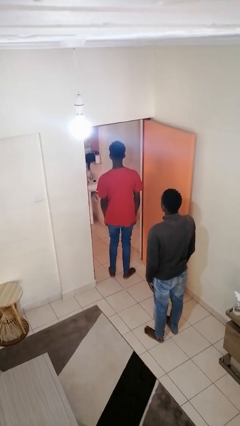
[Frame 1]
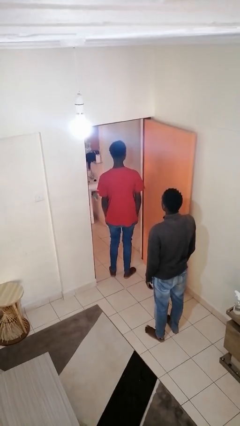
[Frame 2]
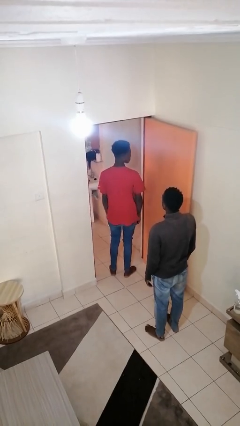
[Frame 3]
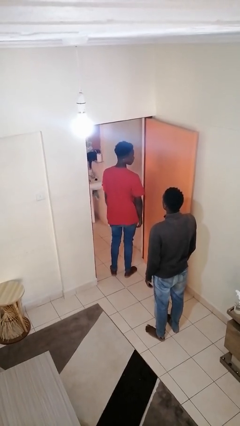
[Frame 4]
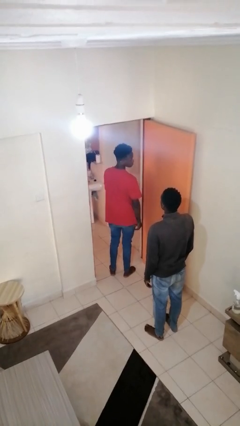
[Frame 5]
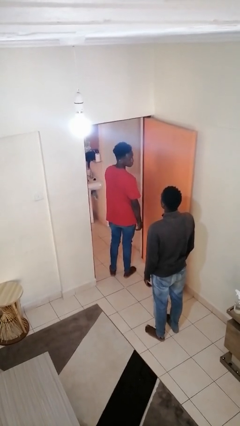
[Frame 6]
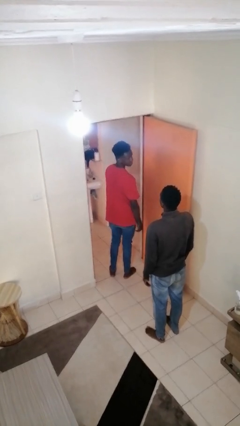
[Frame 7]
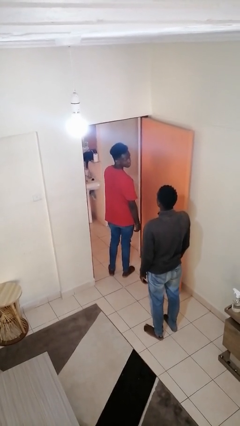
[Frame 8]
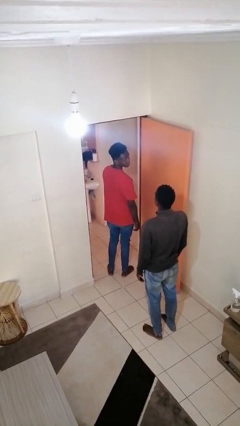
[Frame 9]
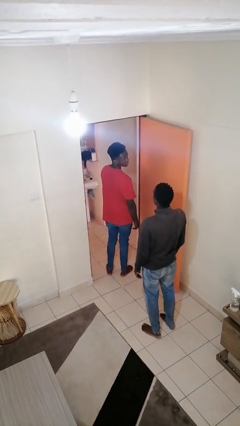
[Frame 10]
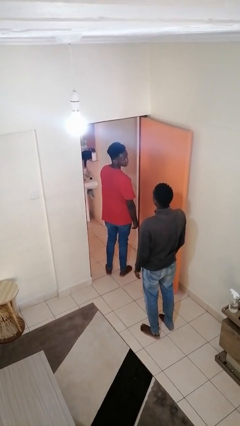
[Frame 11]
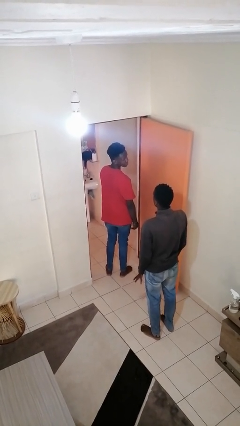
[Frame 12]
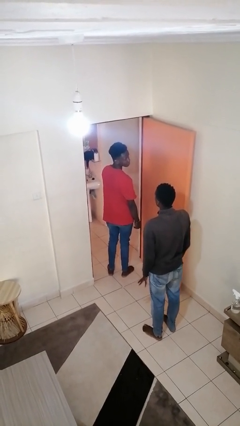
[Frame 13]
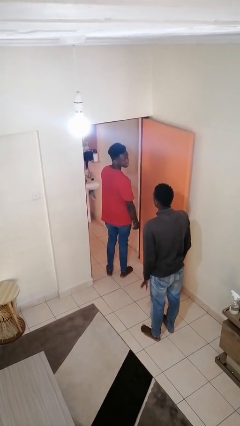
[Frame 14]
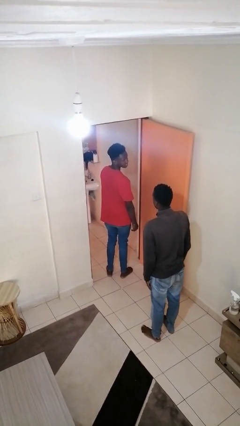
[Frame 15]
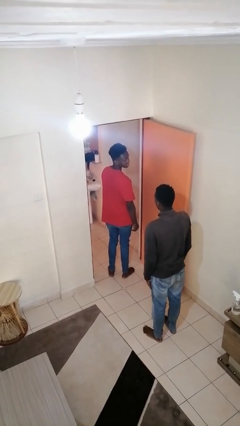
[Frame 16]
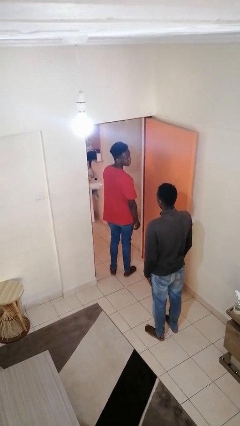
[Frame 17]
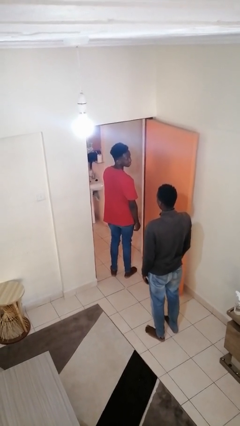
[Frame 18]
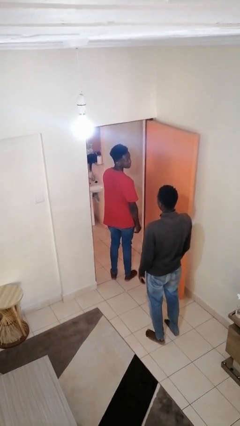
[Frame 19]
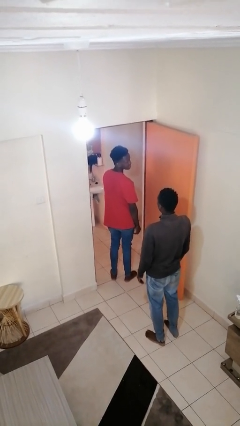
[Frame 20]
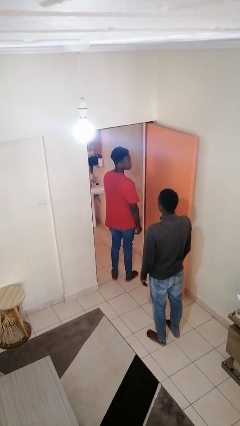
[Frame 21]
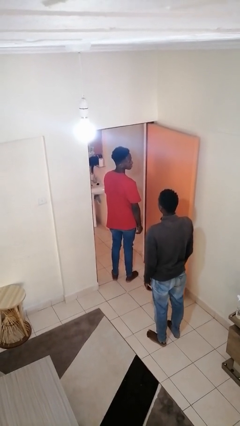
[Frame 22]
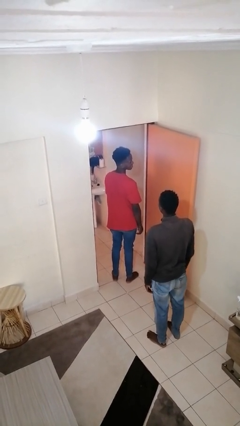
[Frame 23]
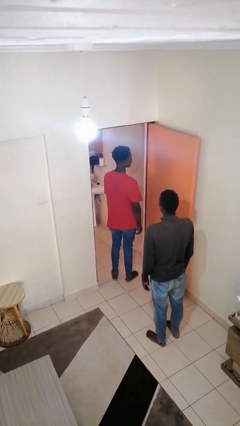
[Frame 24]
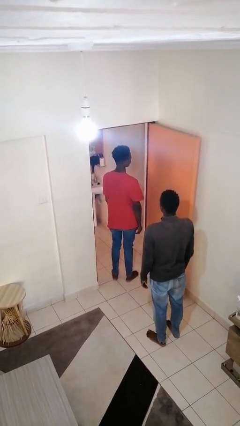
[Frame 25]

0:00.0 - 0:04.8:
person looks over shoulder

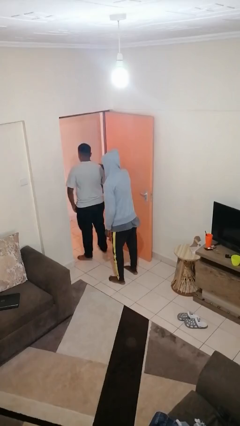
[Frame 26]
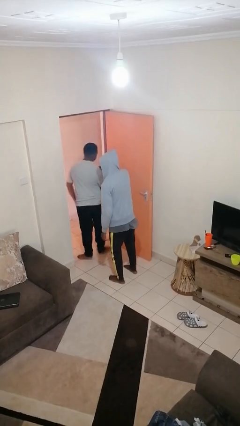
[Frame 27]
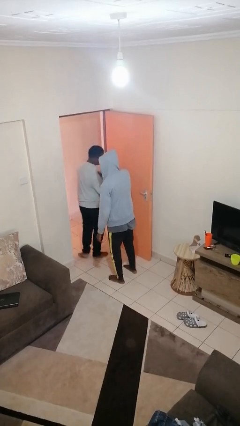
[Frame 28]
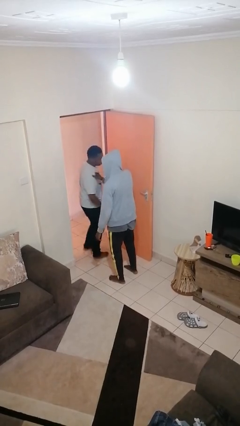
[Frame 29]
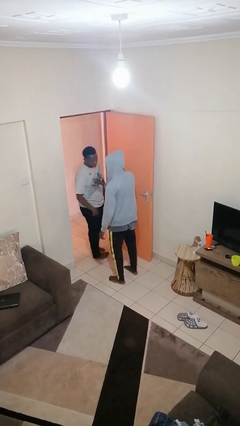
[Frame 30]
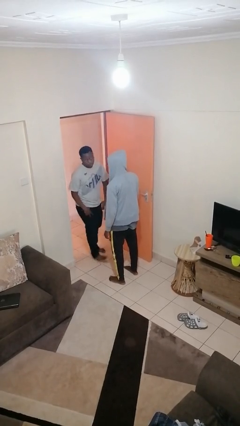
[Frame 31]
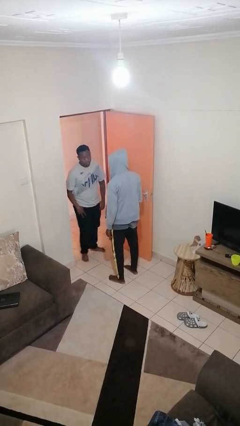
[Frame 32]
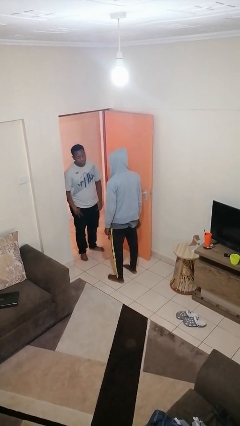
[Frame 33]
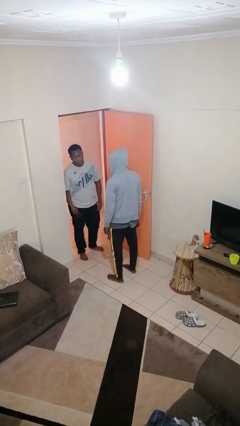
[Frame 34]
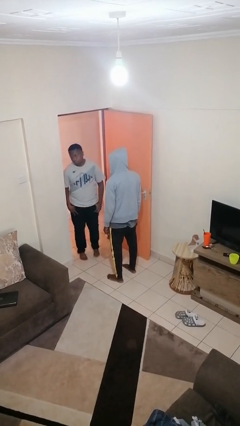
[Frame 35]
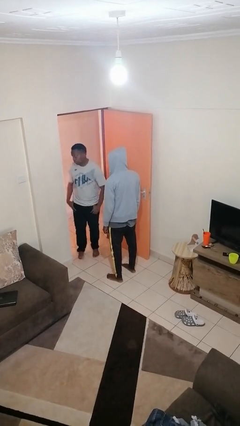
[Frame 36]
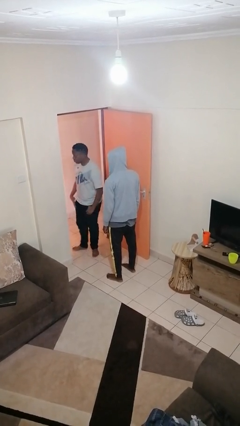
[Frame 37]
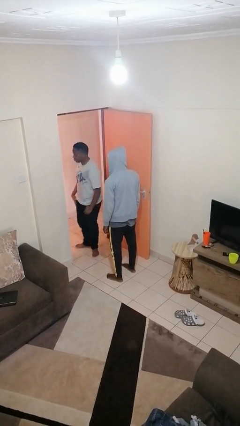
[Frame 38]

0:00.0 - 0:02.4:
person spins person around

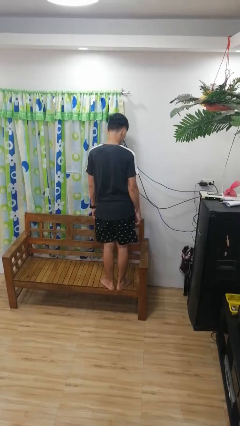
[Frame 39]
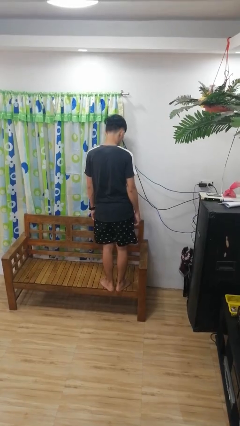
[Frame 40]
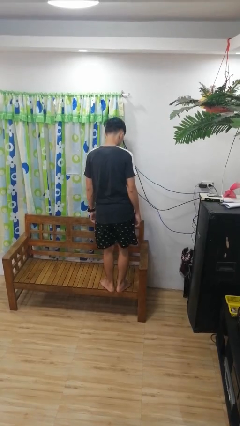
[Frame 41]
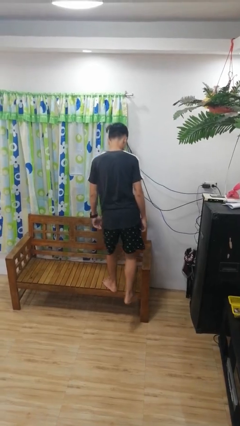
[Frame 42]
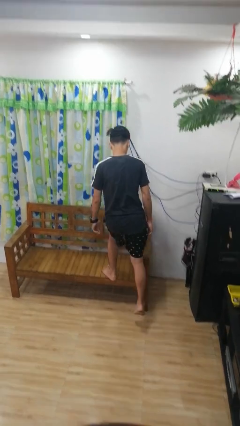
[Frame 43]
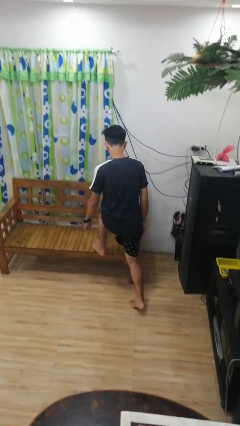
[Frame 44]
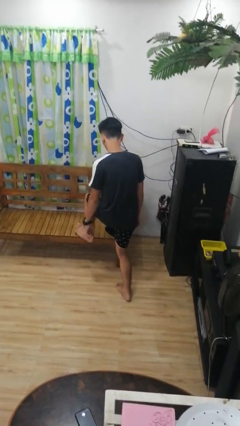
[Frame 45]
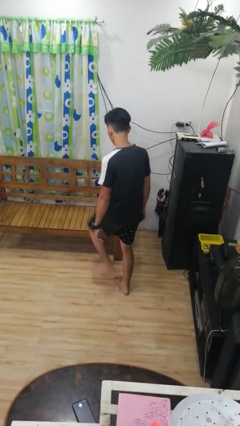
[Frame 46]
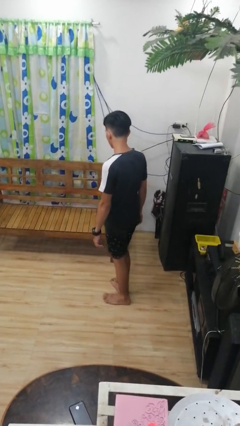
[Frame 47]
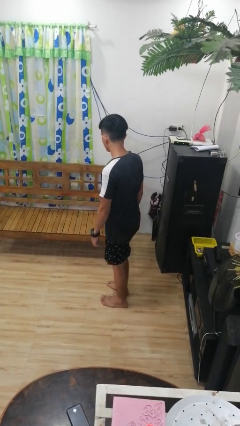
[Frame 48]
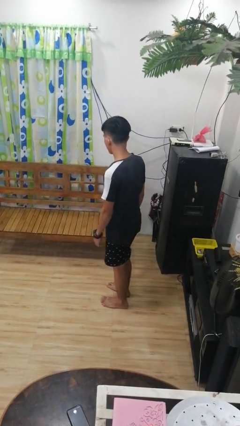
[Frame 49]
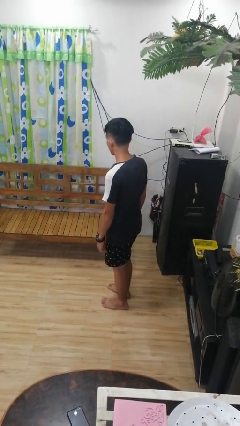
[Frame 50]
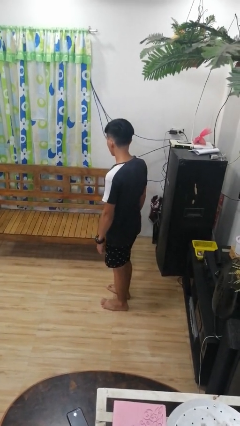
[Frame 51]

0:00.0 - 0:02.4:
person climbs off couch

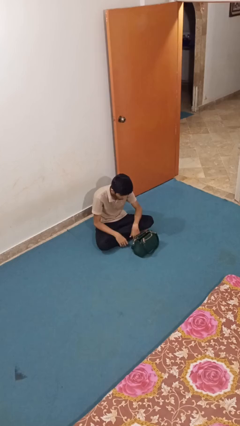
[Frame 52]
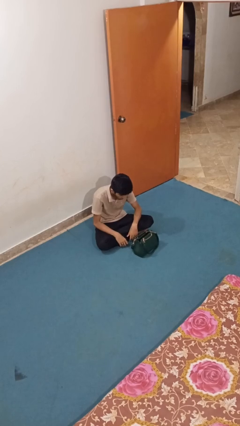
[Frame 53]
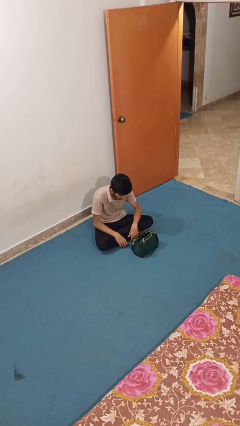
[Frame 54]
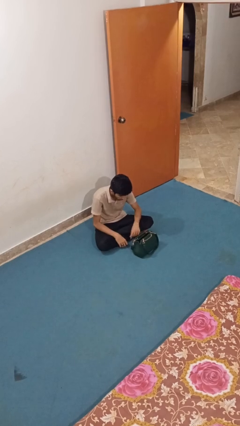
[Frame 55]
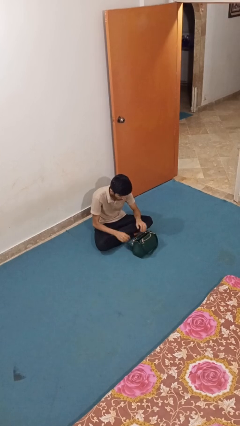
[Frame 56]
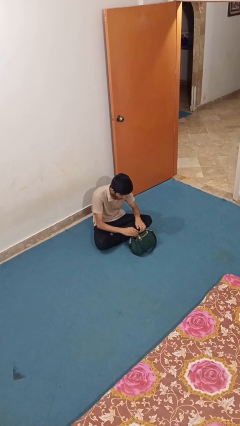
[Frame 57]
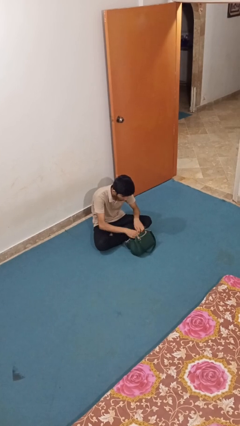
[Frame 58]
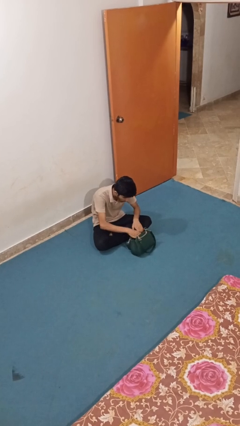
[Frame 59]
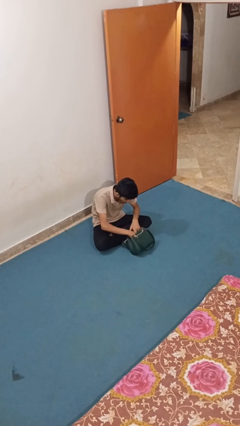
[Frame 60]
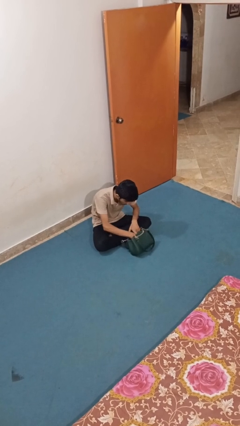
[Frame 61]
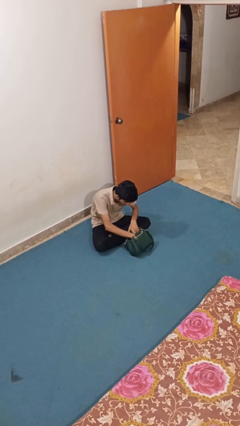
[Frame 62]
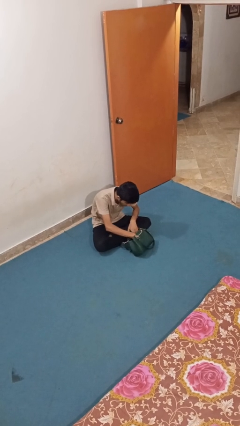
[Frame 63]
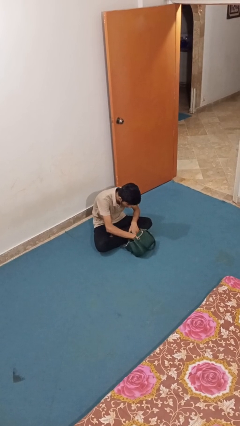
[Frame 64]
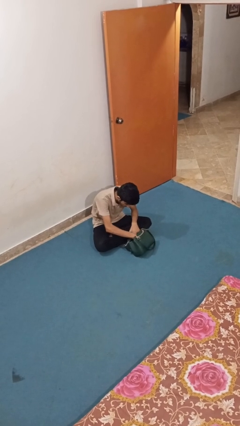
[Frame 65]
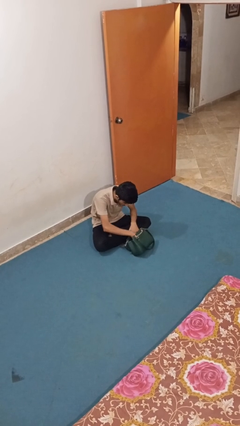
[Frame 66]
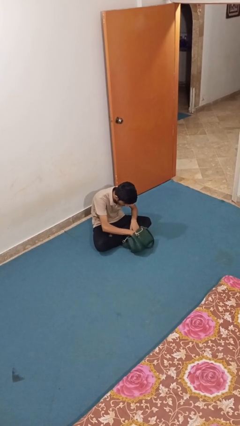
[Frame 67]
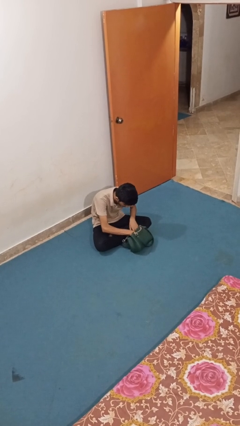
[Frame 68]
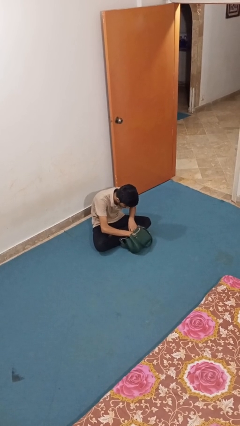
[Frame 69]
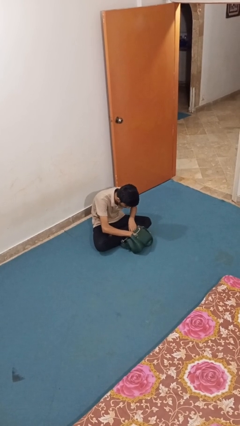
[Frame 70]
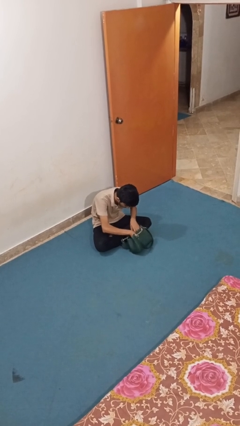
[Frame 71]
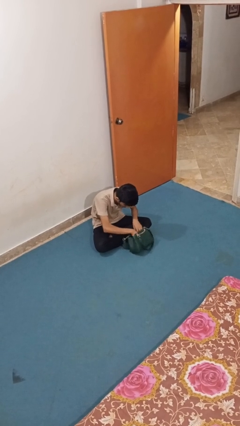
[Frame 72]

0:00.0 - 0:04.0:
person searches in purse

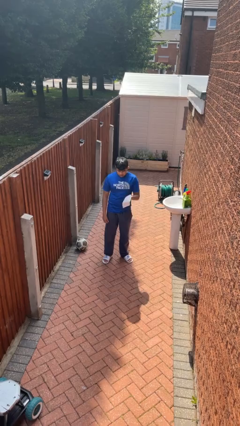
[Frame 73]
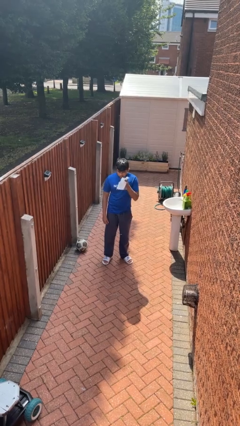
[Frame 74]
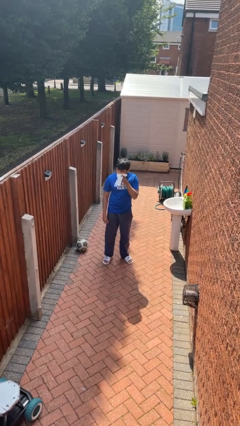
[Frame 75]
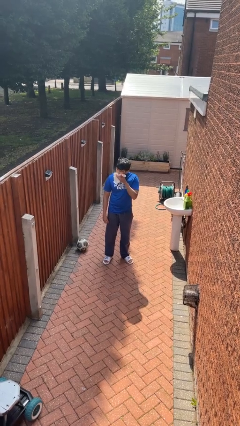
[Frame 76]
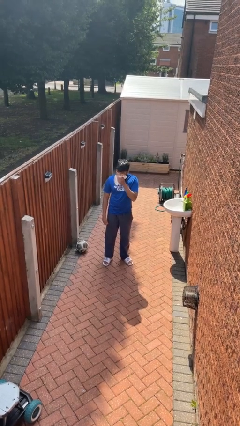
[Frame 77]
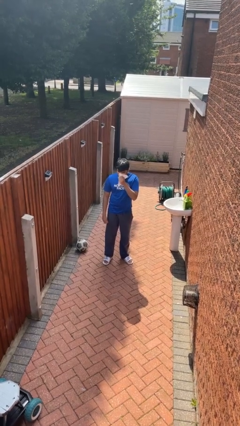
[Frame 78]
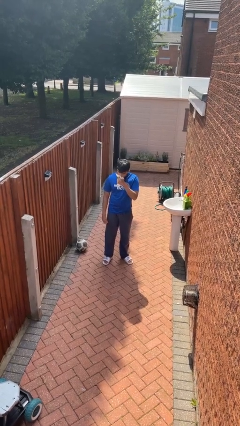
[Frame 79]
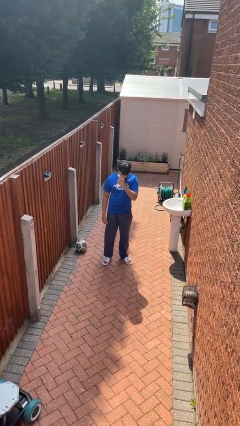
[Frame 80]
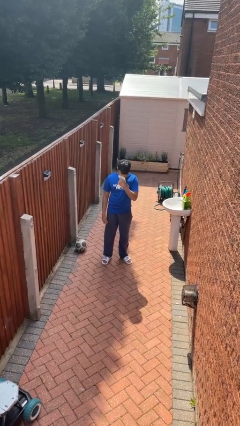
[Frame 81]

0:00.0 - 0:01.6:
person wipes mouth with napkin

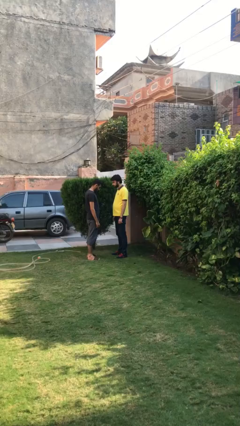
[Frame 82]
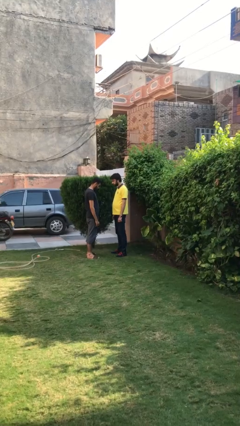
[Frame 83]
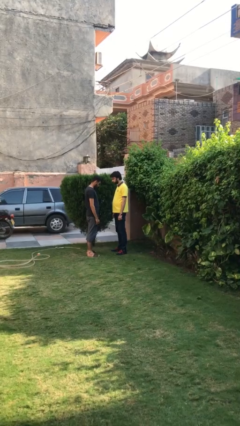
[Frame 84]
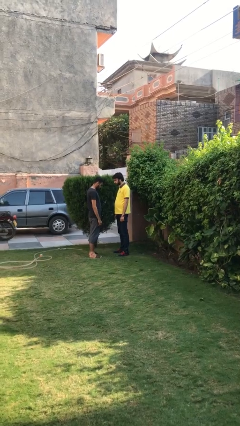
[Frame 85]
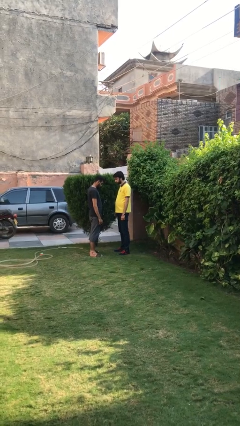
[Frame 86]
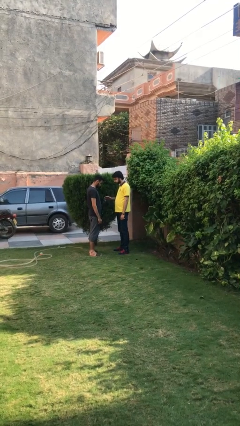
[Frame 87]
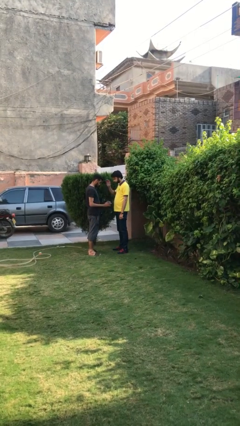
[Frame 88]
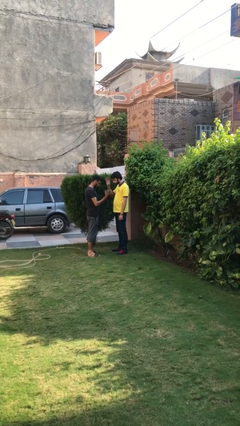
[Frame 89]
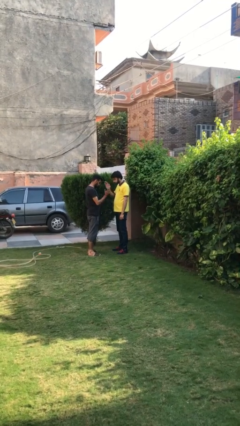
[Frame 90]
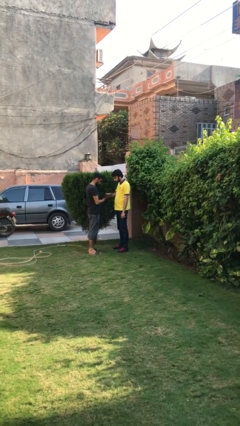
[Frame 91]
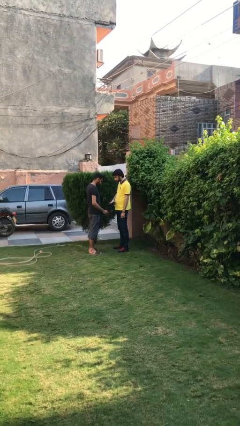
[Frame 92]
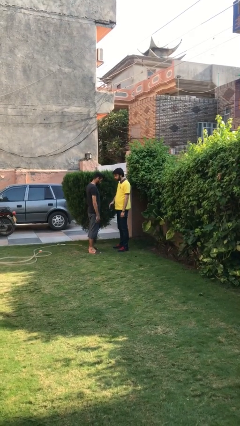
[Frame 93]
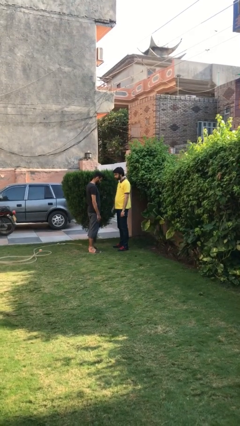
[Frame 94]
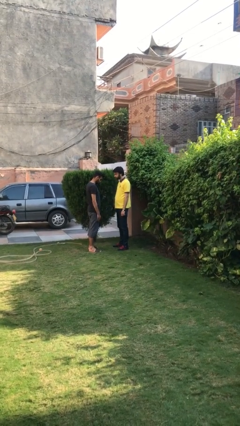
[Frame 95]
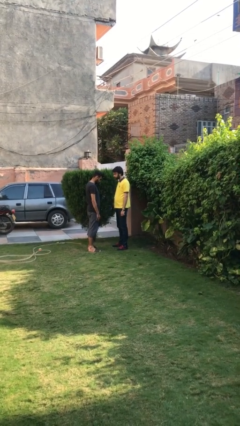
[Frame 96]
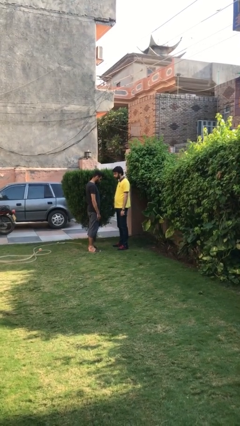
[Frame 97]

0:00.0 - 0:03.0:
person highfives hand
